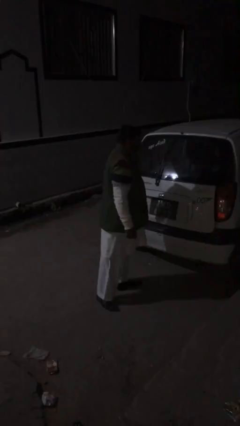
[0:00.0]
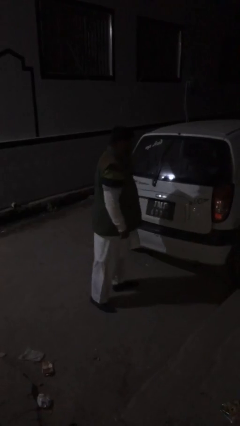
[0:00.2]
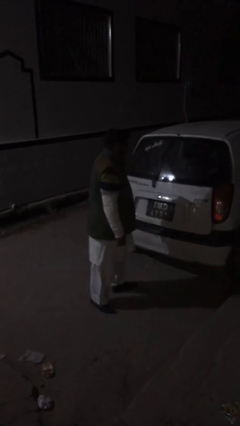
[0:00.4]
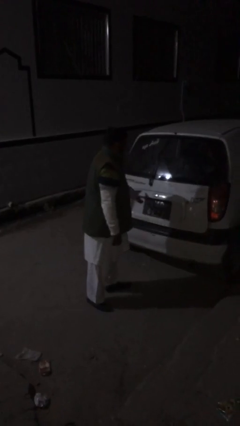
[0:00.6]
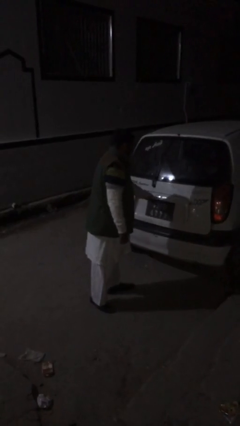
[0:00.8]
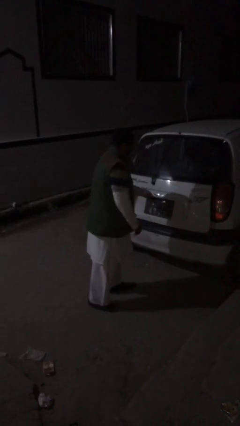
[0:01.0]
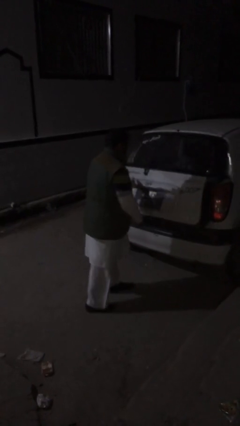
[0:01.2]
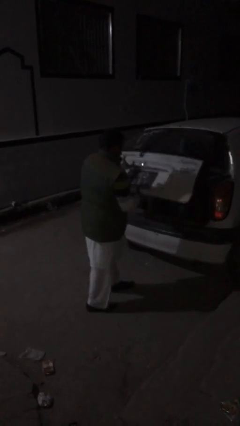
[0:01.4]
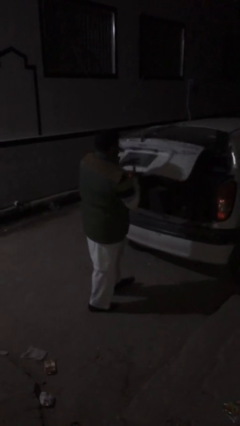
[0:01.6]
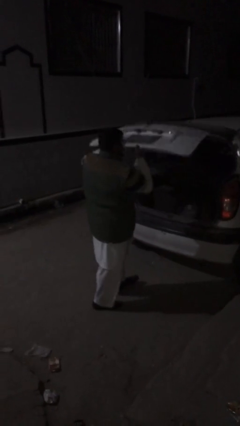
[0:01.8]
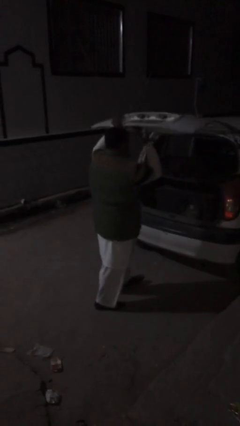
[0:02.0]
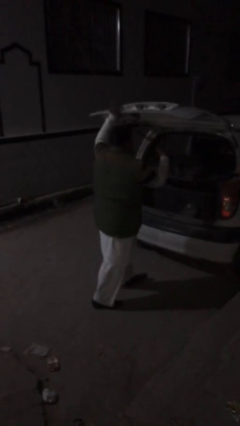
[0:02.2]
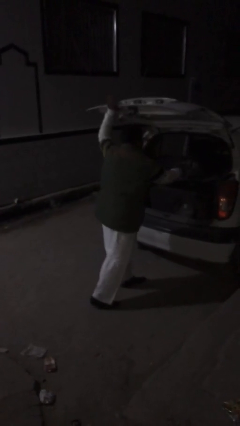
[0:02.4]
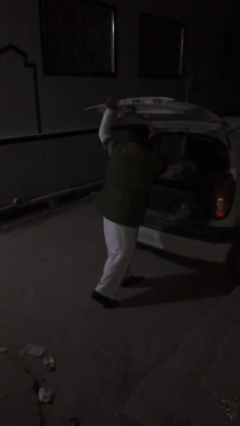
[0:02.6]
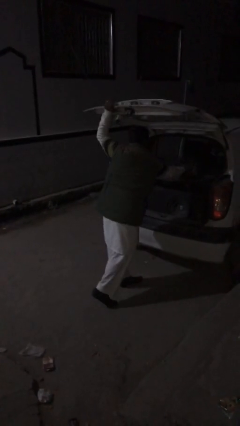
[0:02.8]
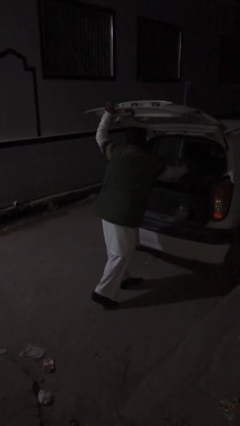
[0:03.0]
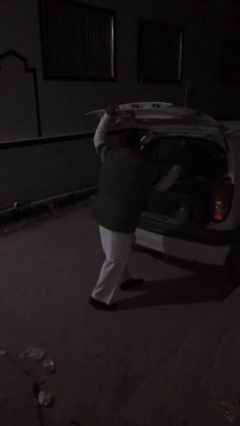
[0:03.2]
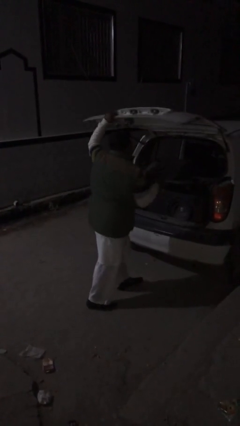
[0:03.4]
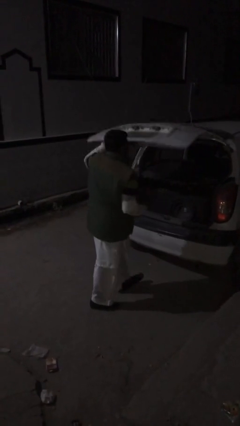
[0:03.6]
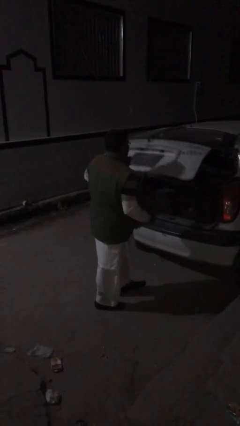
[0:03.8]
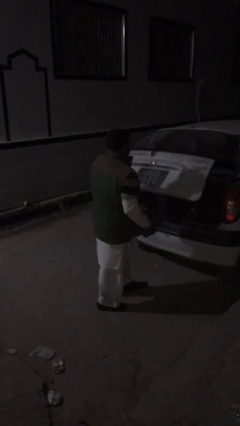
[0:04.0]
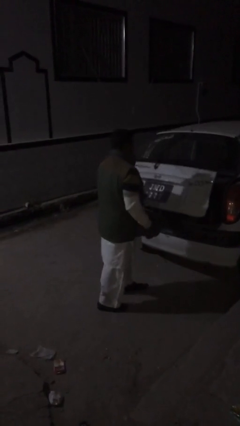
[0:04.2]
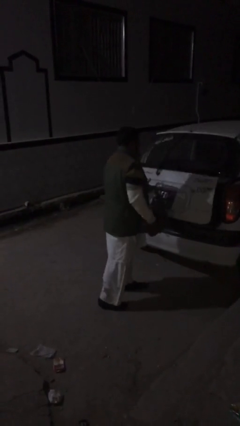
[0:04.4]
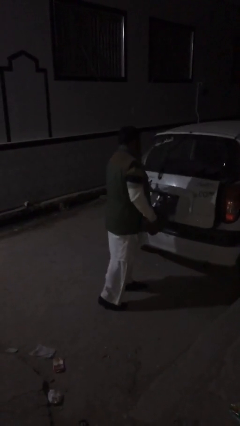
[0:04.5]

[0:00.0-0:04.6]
person unloads car

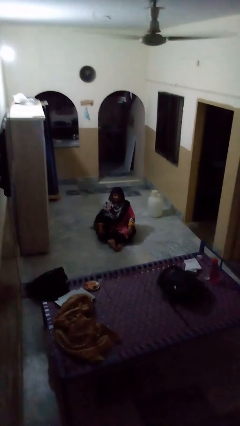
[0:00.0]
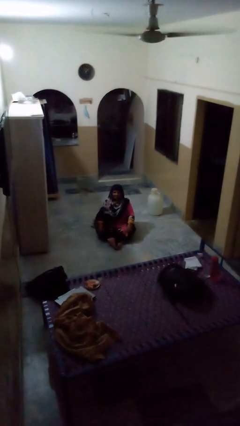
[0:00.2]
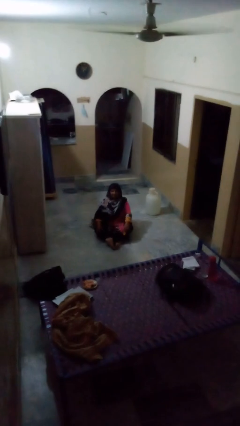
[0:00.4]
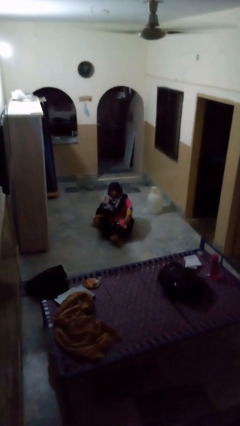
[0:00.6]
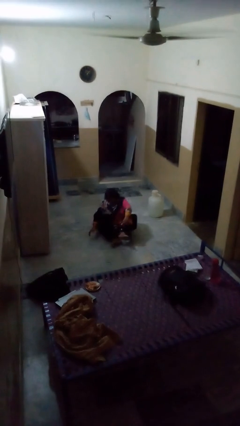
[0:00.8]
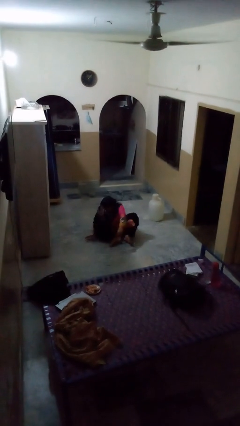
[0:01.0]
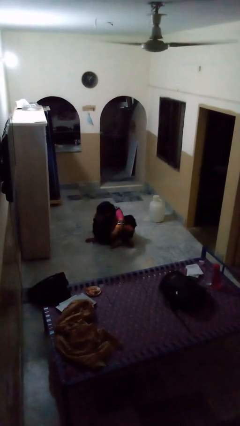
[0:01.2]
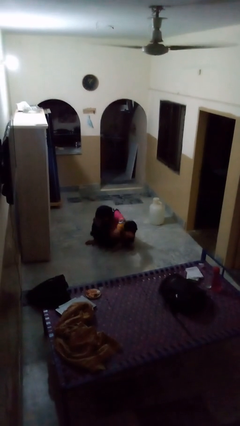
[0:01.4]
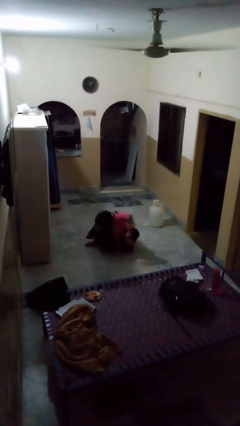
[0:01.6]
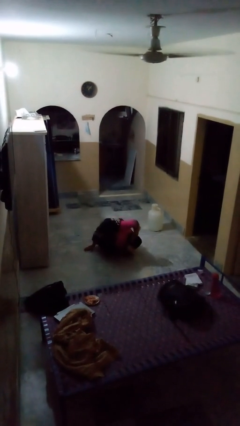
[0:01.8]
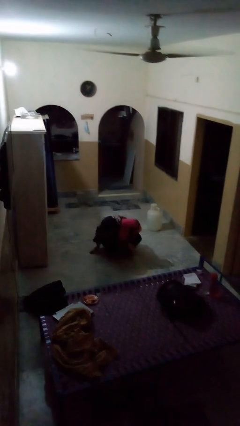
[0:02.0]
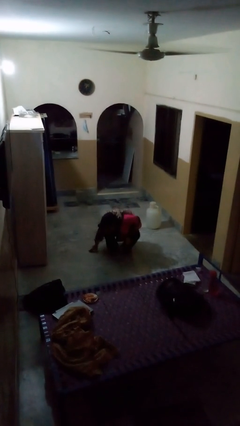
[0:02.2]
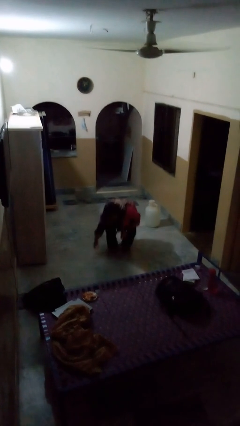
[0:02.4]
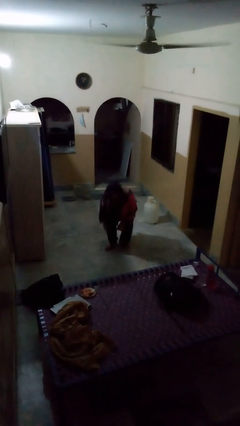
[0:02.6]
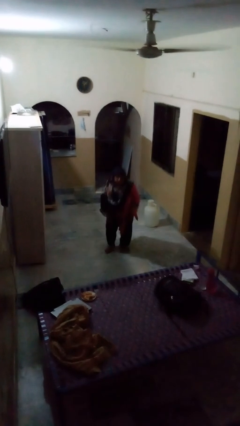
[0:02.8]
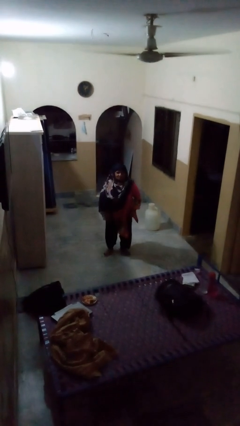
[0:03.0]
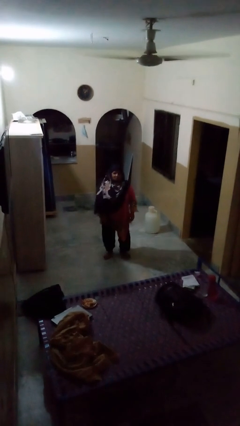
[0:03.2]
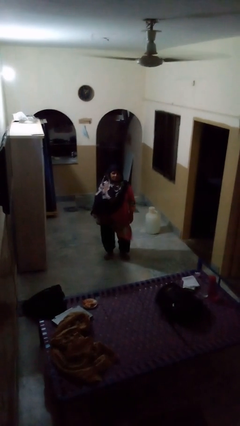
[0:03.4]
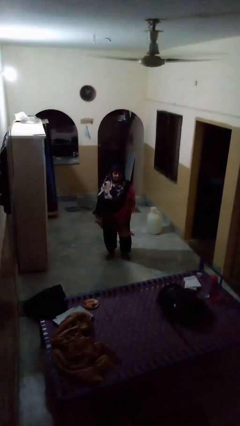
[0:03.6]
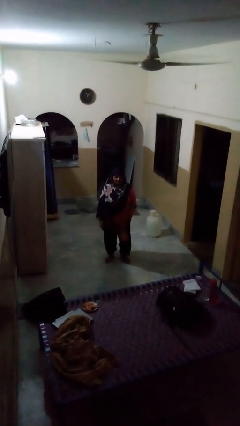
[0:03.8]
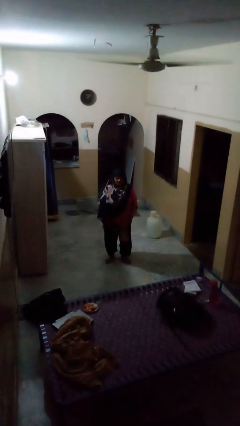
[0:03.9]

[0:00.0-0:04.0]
person stands up from floor

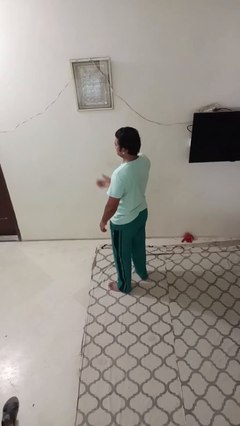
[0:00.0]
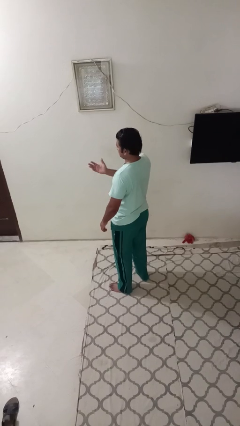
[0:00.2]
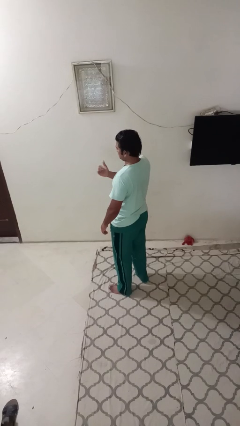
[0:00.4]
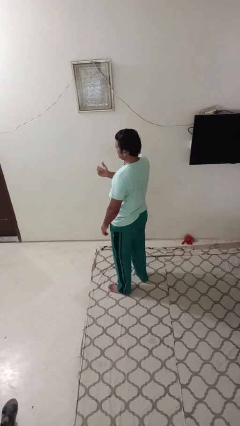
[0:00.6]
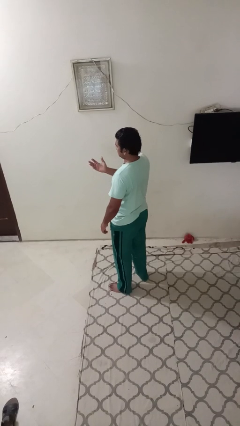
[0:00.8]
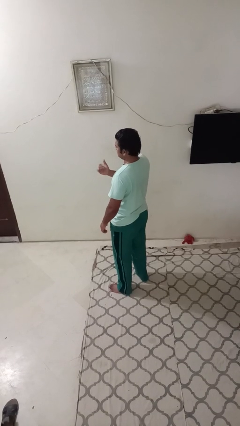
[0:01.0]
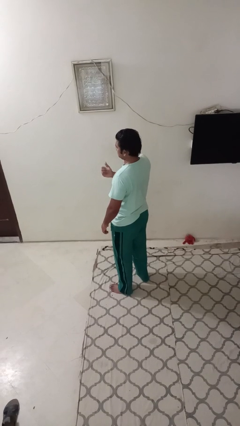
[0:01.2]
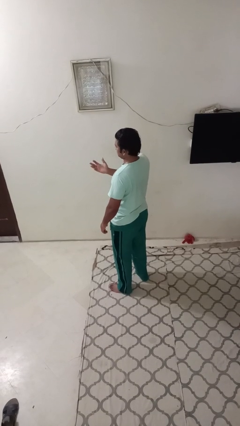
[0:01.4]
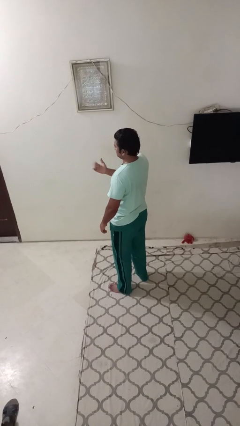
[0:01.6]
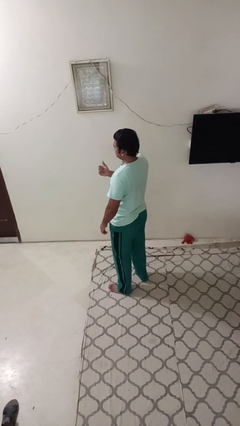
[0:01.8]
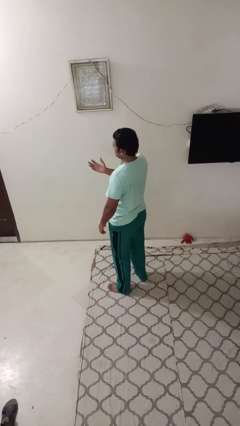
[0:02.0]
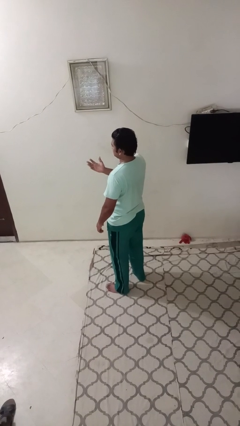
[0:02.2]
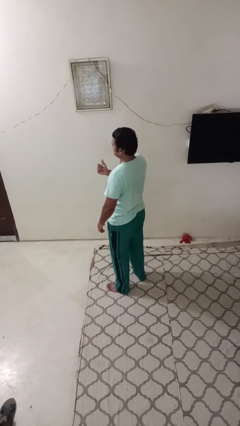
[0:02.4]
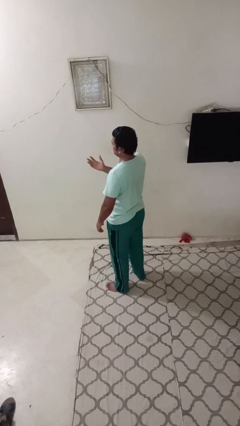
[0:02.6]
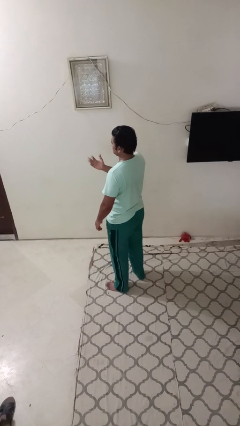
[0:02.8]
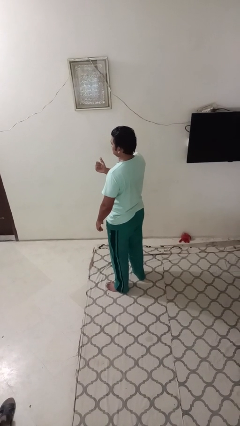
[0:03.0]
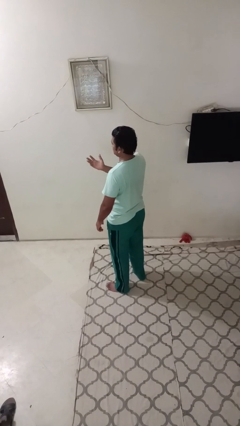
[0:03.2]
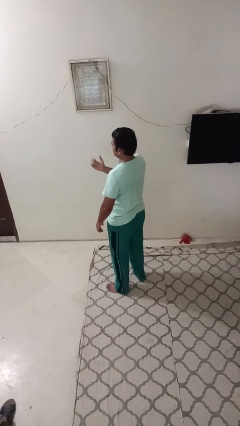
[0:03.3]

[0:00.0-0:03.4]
person gestures come here

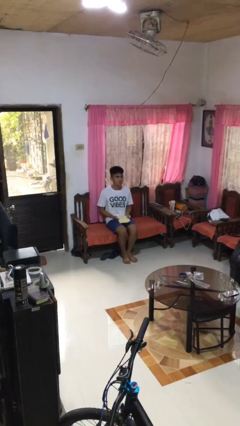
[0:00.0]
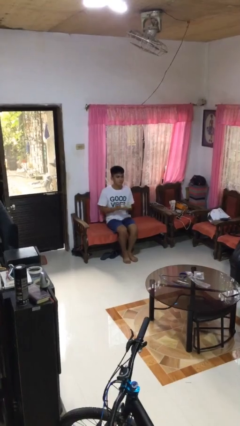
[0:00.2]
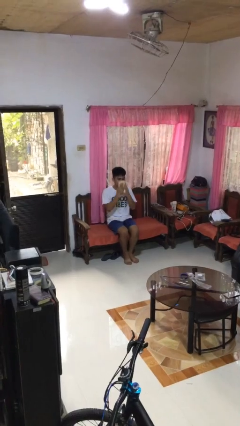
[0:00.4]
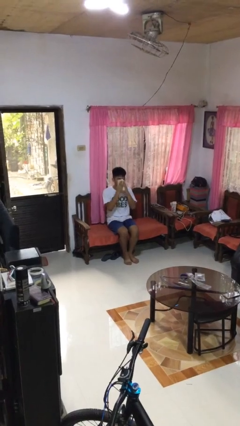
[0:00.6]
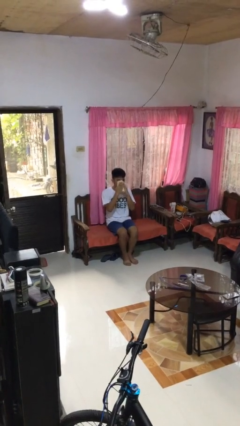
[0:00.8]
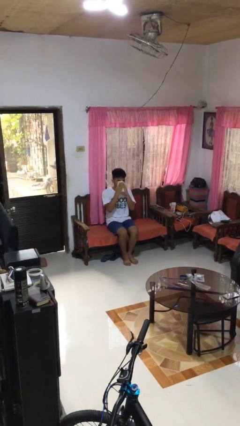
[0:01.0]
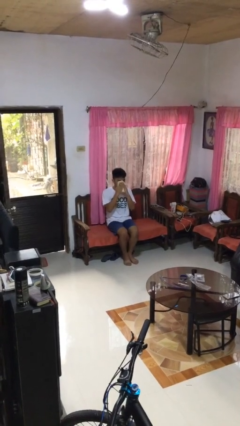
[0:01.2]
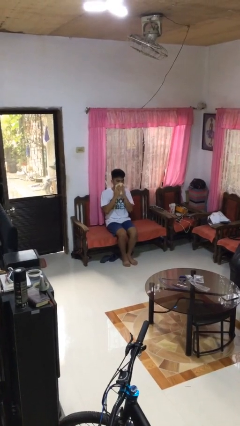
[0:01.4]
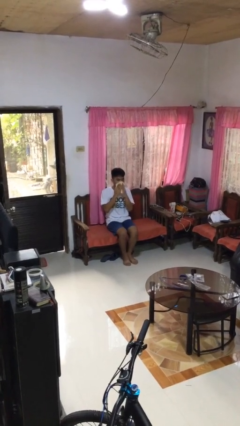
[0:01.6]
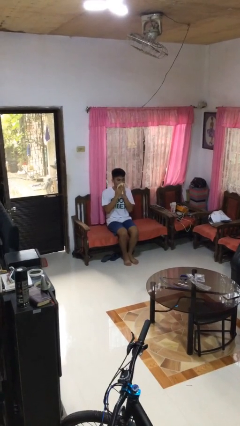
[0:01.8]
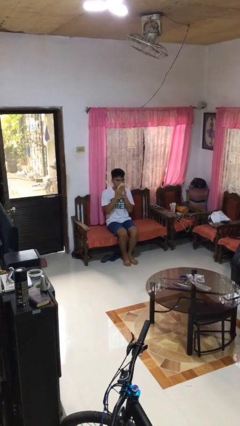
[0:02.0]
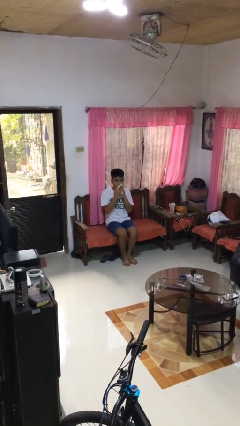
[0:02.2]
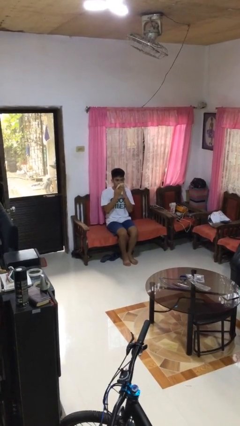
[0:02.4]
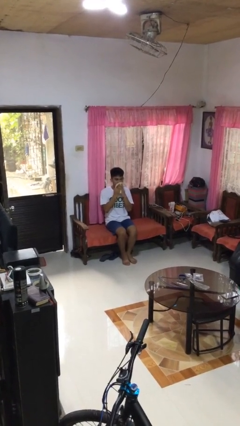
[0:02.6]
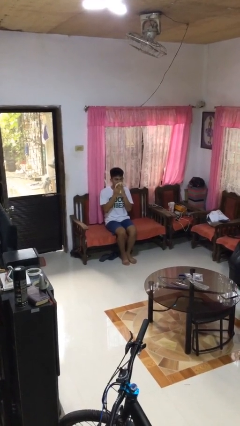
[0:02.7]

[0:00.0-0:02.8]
person wipes mouth with napkin

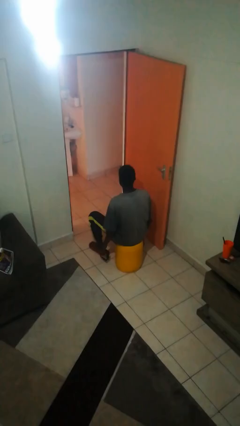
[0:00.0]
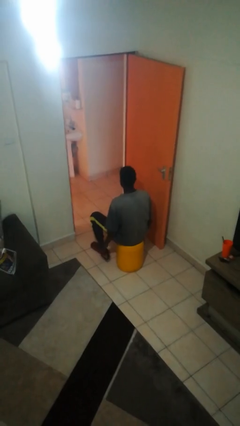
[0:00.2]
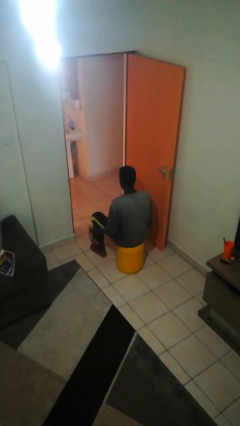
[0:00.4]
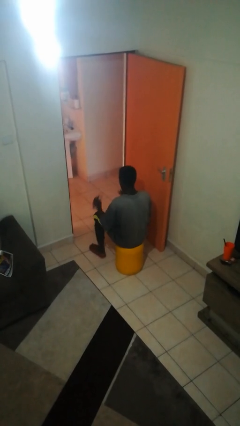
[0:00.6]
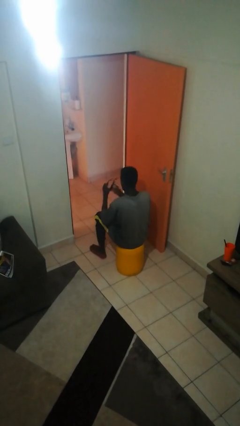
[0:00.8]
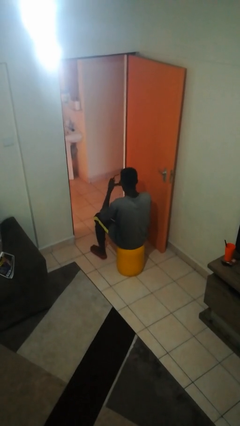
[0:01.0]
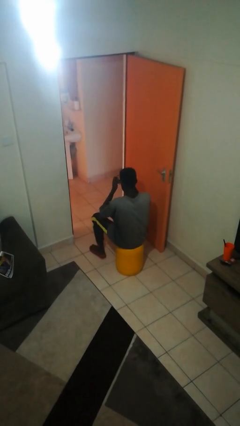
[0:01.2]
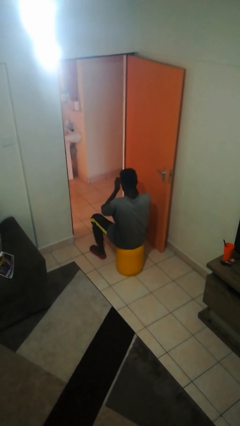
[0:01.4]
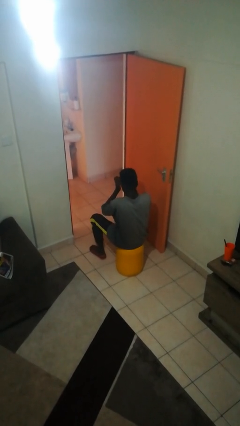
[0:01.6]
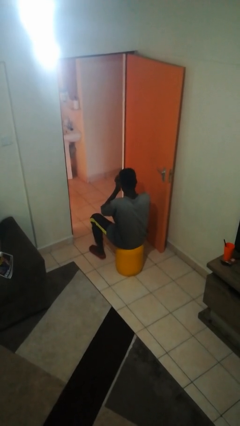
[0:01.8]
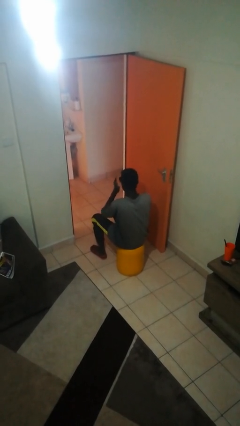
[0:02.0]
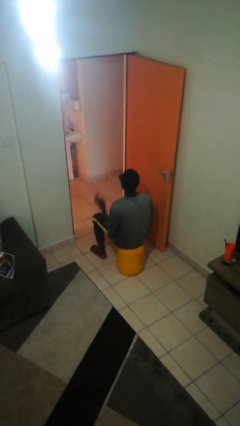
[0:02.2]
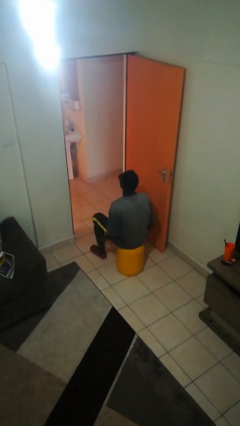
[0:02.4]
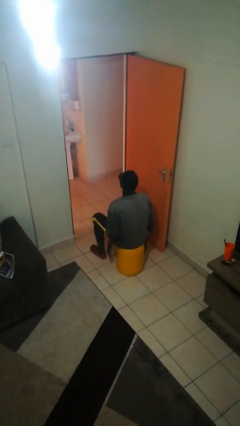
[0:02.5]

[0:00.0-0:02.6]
person puts on sunglasses

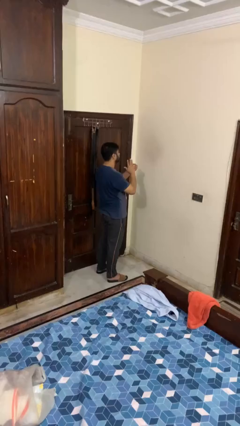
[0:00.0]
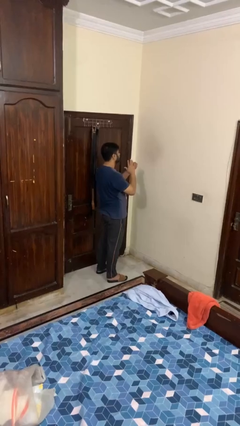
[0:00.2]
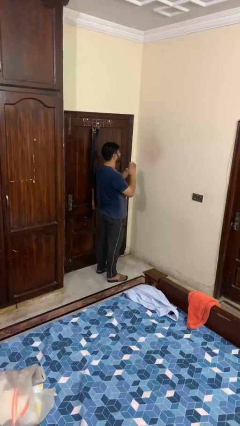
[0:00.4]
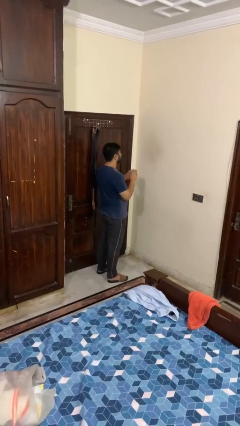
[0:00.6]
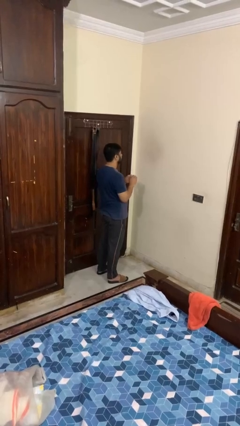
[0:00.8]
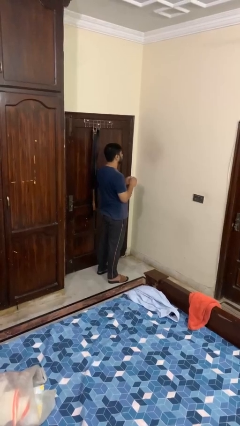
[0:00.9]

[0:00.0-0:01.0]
person takes off ring
